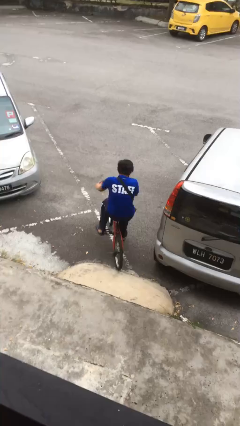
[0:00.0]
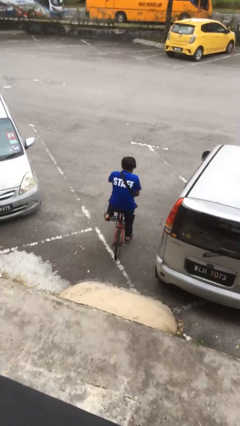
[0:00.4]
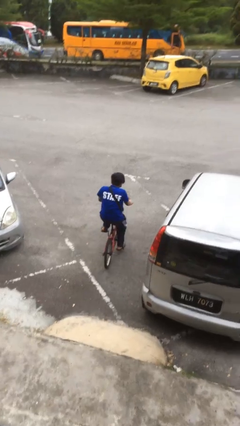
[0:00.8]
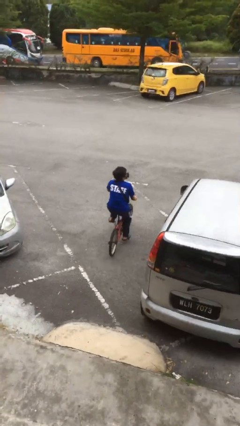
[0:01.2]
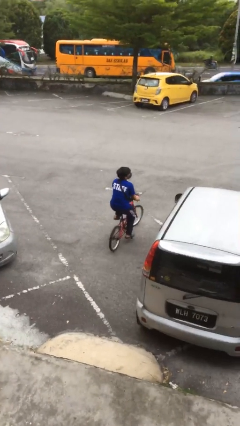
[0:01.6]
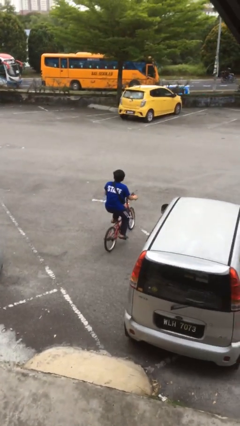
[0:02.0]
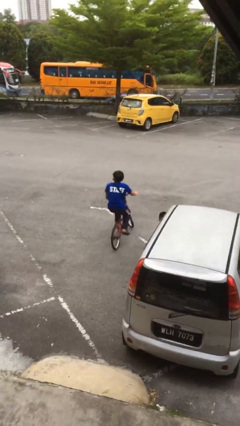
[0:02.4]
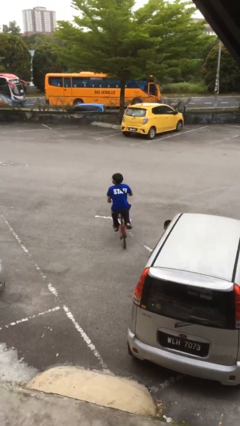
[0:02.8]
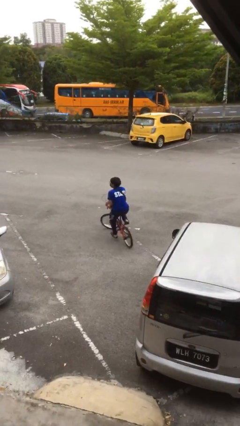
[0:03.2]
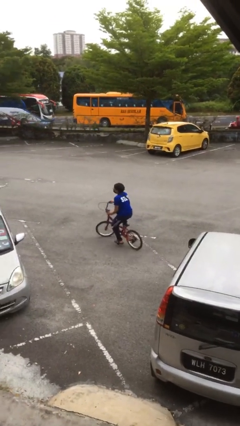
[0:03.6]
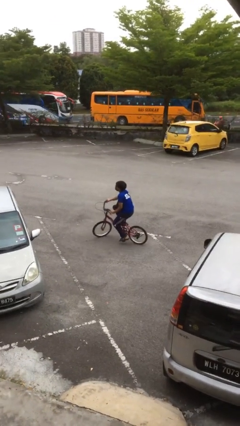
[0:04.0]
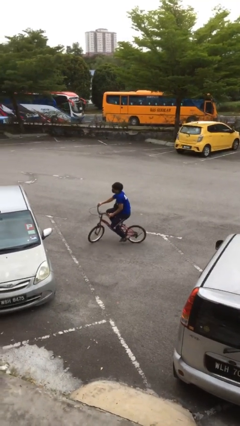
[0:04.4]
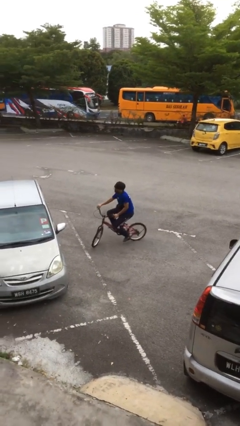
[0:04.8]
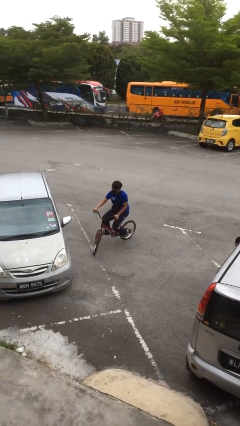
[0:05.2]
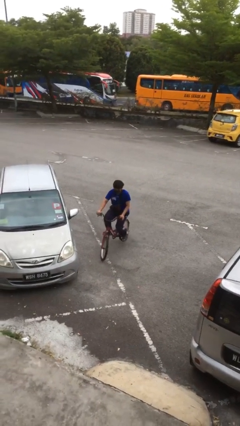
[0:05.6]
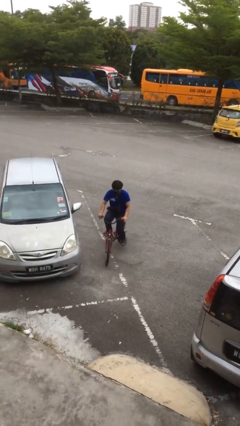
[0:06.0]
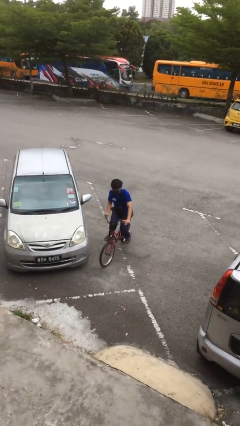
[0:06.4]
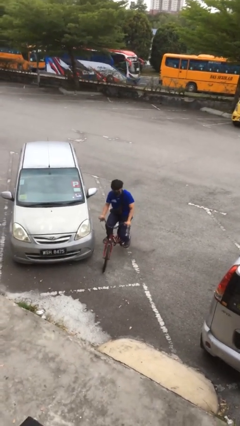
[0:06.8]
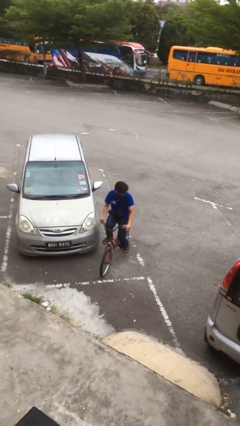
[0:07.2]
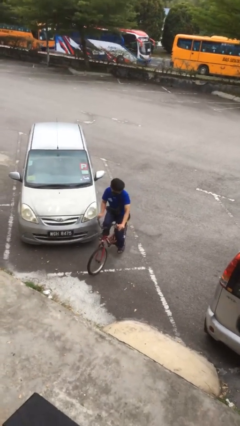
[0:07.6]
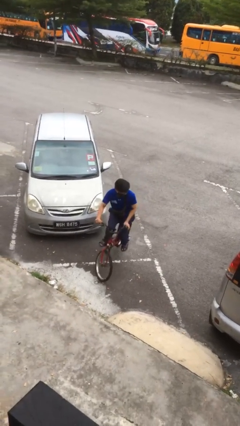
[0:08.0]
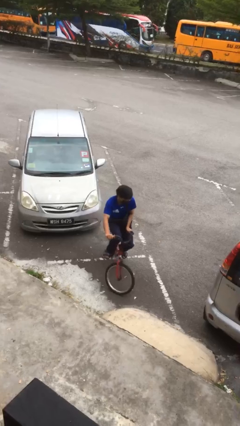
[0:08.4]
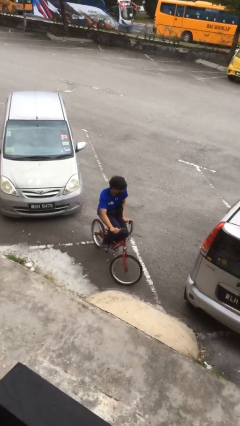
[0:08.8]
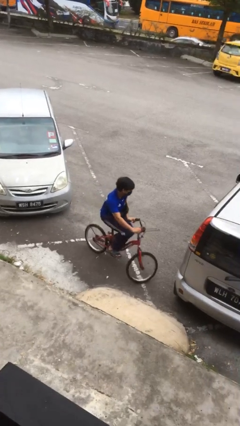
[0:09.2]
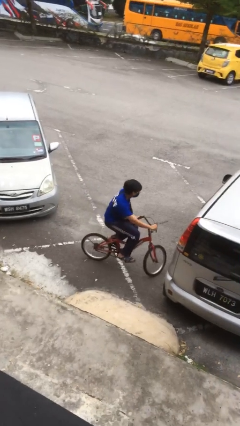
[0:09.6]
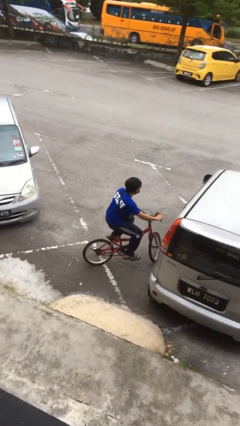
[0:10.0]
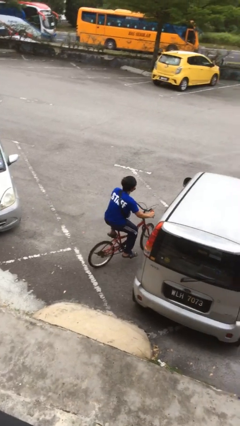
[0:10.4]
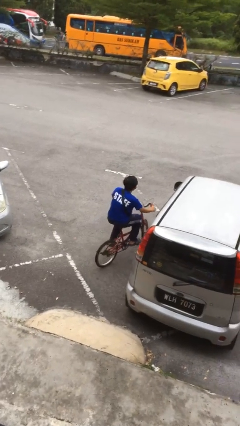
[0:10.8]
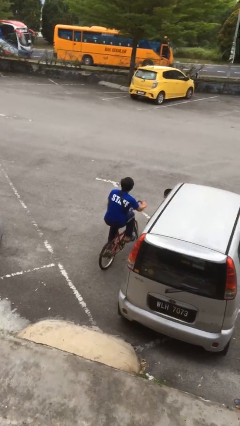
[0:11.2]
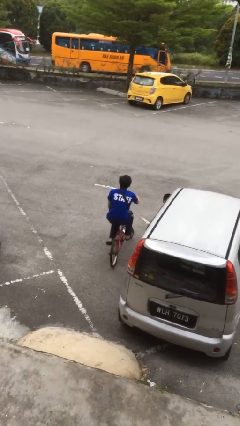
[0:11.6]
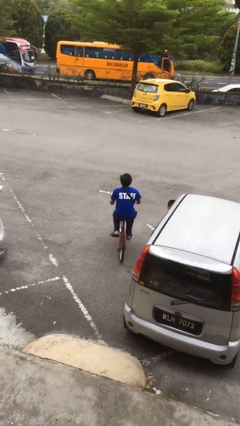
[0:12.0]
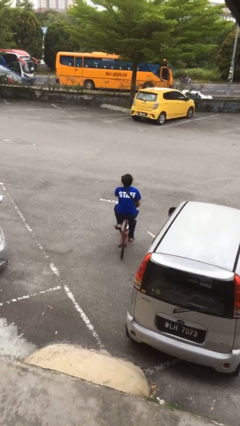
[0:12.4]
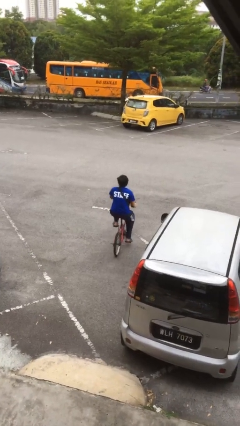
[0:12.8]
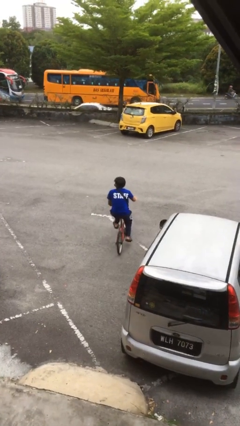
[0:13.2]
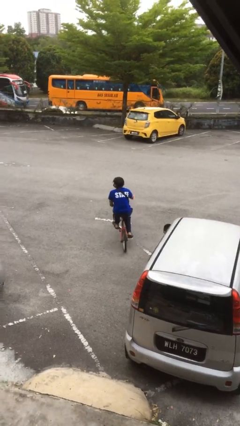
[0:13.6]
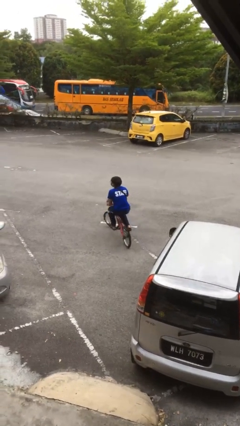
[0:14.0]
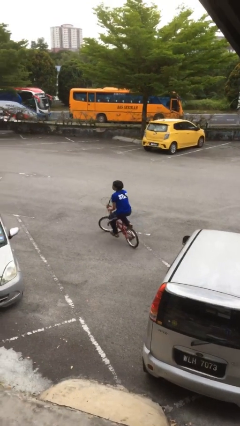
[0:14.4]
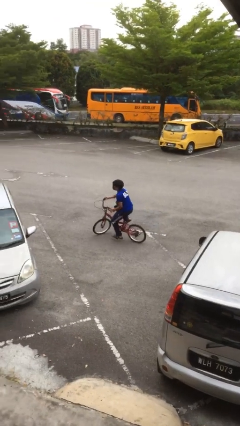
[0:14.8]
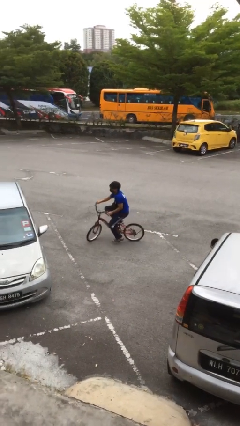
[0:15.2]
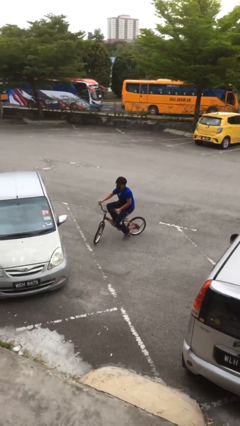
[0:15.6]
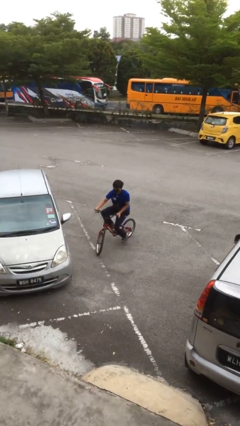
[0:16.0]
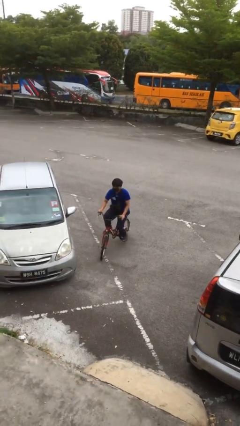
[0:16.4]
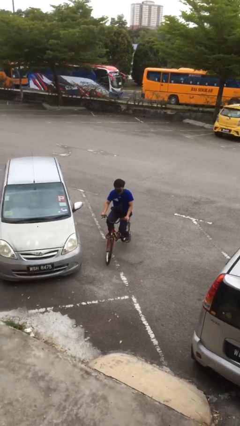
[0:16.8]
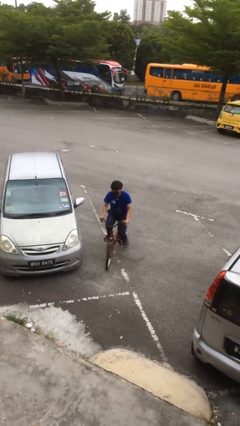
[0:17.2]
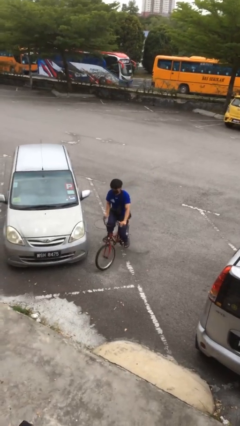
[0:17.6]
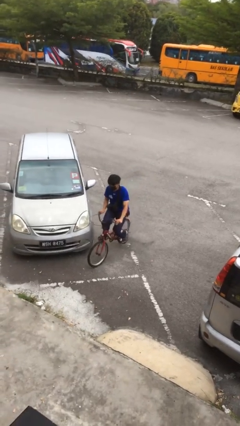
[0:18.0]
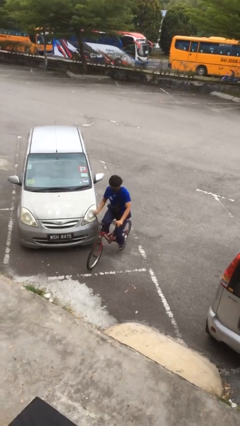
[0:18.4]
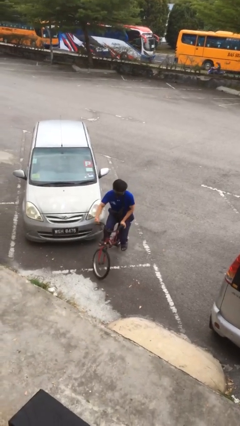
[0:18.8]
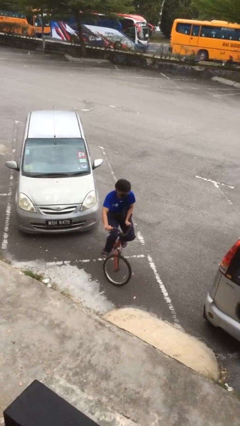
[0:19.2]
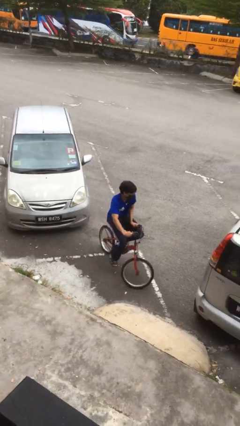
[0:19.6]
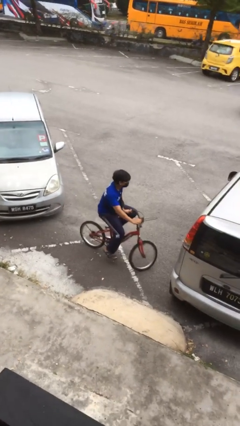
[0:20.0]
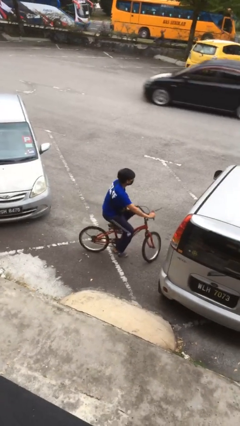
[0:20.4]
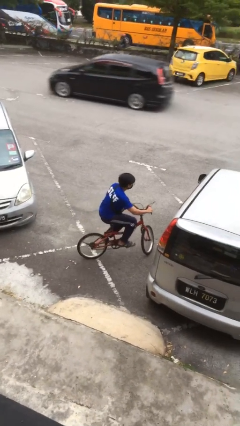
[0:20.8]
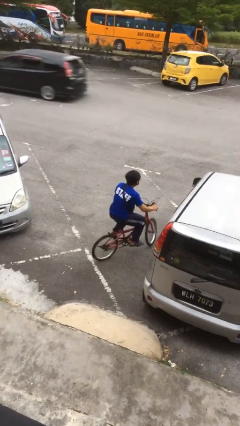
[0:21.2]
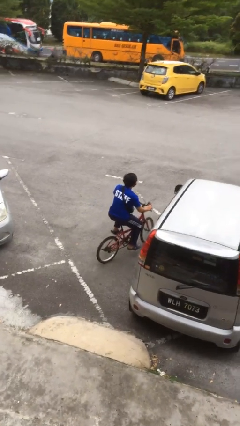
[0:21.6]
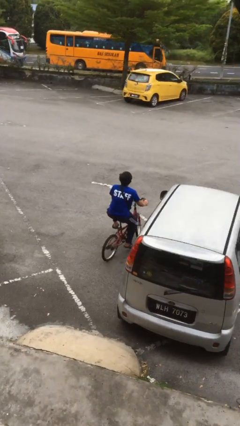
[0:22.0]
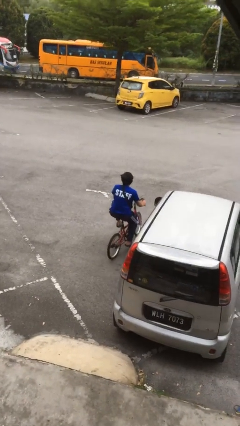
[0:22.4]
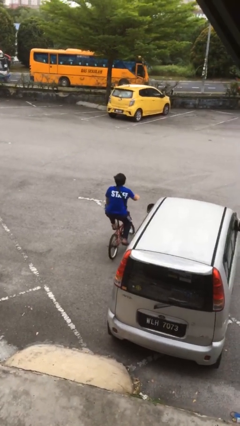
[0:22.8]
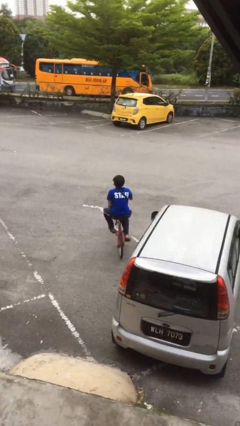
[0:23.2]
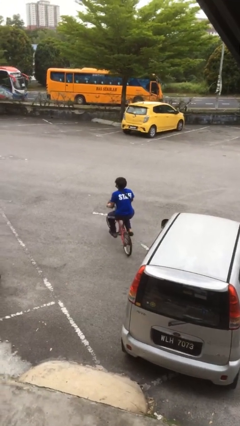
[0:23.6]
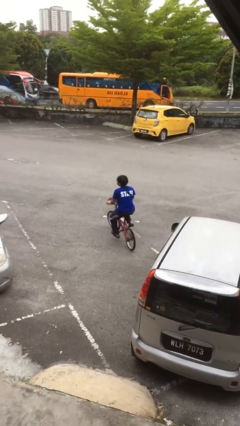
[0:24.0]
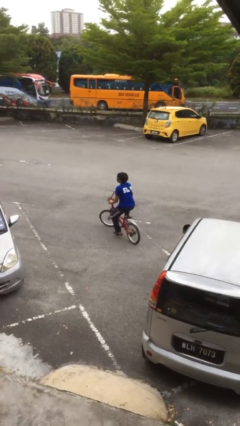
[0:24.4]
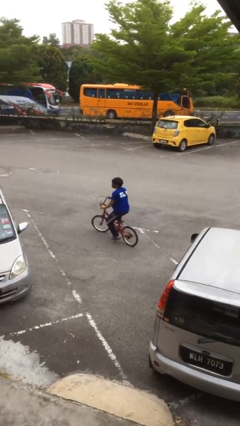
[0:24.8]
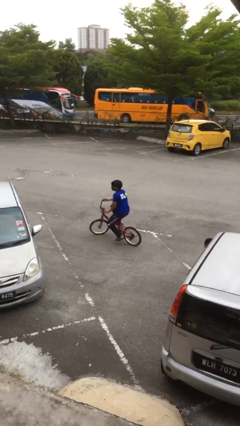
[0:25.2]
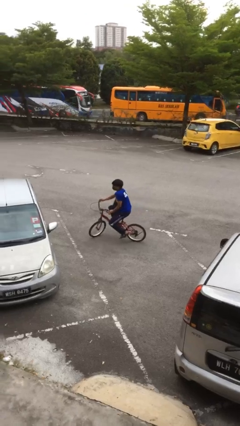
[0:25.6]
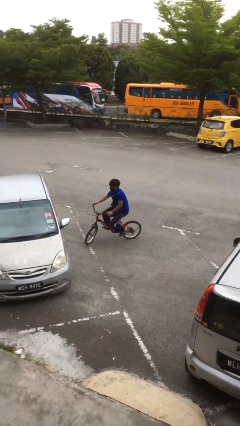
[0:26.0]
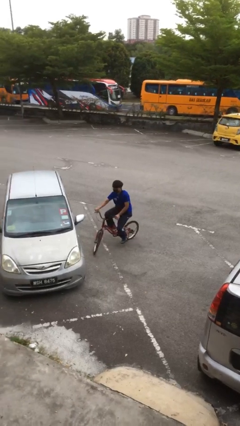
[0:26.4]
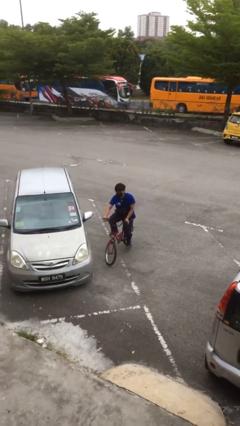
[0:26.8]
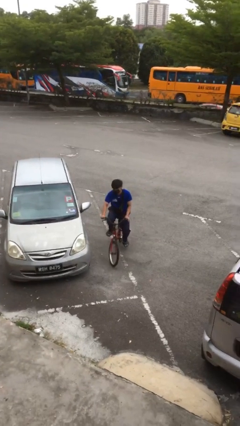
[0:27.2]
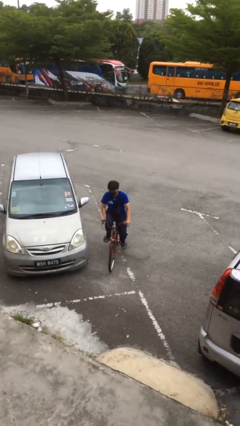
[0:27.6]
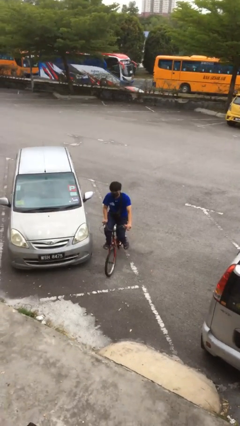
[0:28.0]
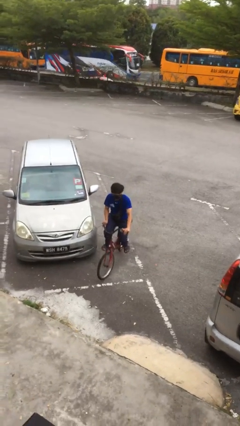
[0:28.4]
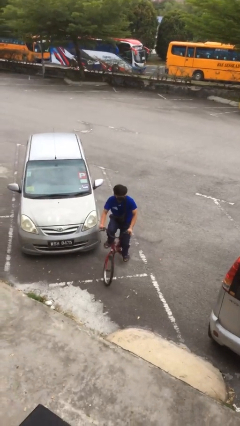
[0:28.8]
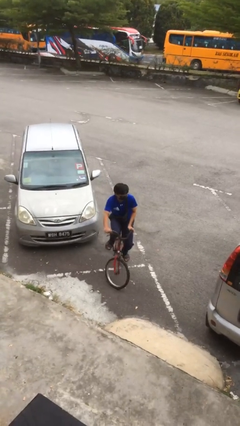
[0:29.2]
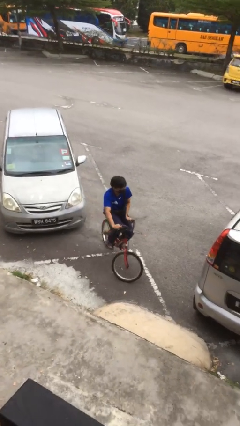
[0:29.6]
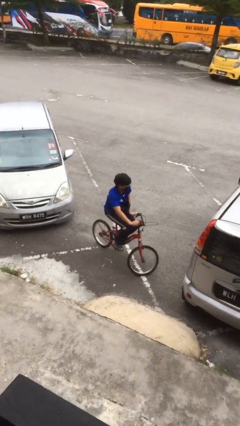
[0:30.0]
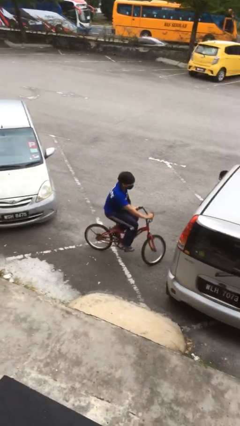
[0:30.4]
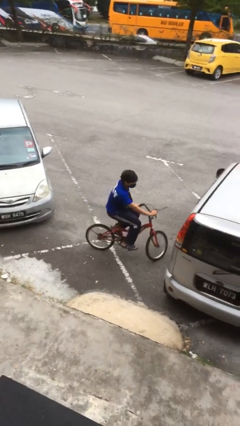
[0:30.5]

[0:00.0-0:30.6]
person rides bicycle

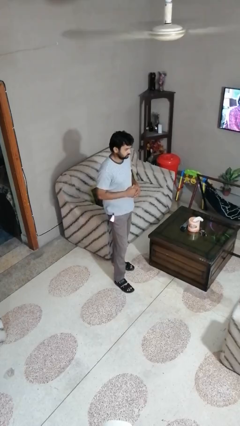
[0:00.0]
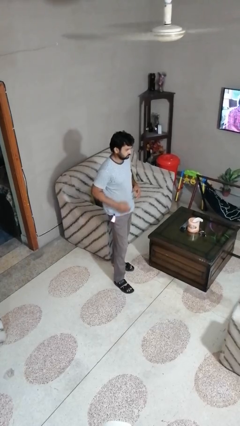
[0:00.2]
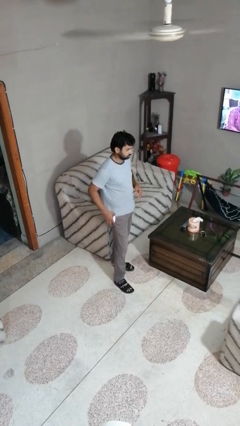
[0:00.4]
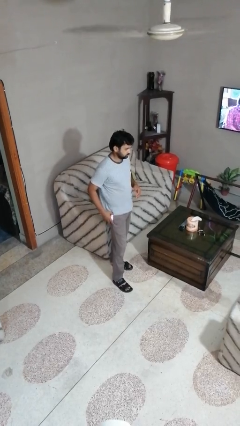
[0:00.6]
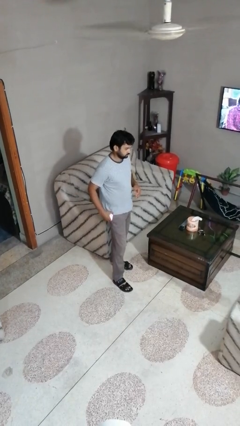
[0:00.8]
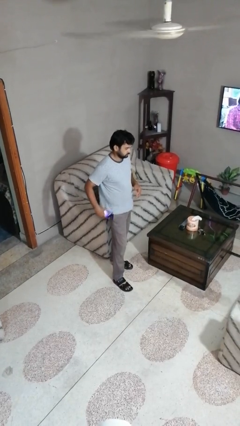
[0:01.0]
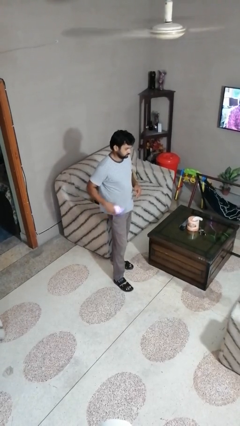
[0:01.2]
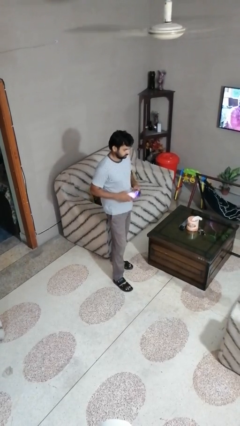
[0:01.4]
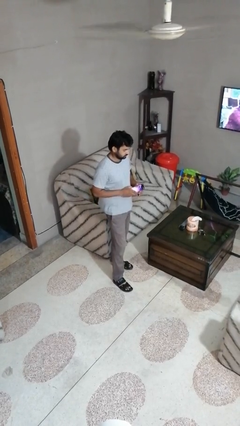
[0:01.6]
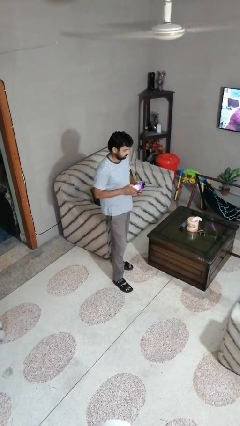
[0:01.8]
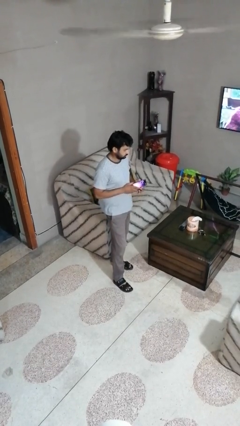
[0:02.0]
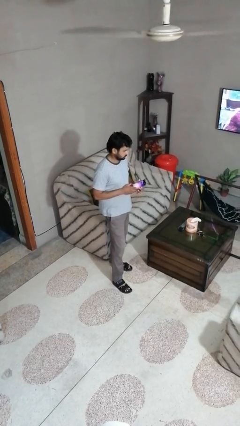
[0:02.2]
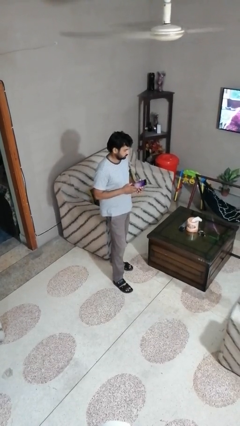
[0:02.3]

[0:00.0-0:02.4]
person takes phone from pocket
